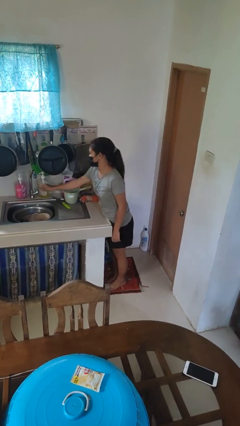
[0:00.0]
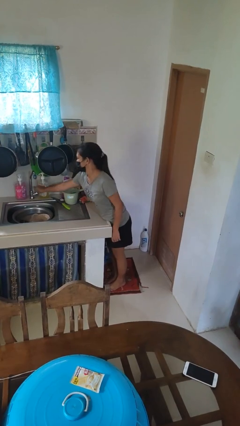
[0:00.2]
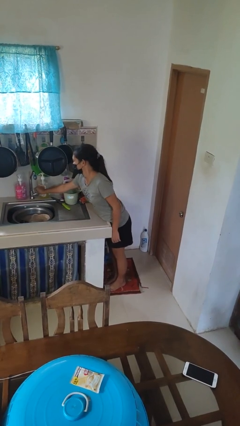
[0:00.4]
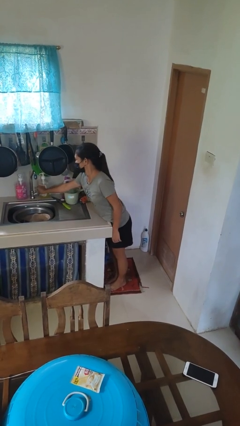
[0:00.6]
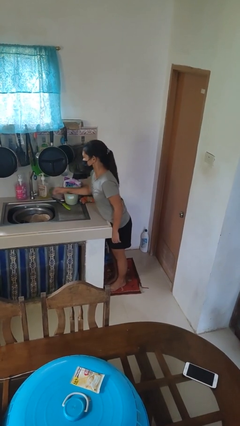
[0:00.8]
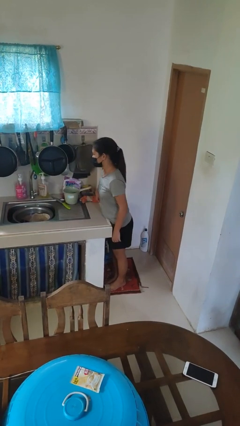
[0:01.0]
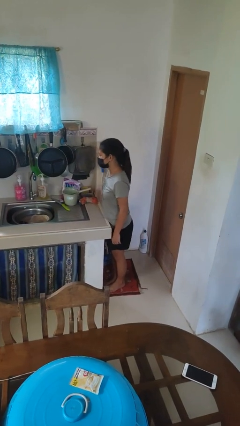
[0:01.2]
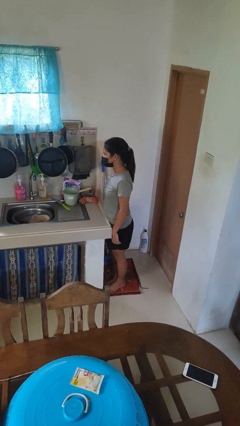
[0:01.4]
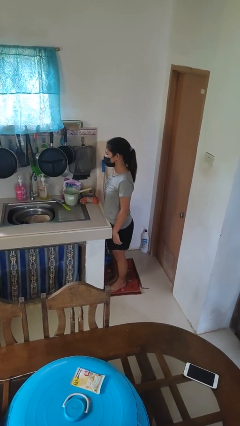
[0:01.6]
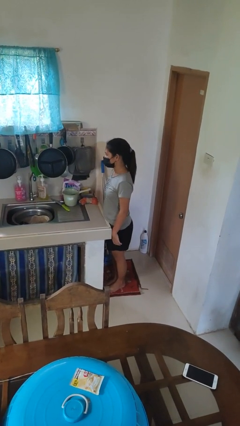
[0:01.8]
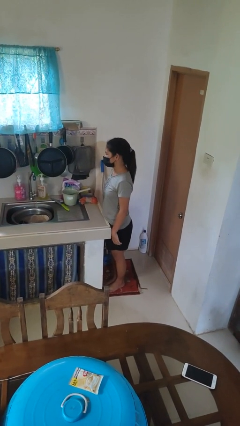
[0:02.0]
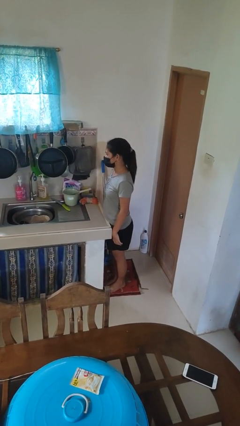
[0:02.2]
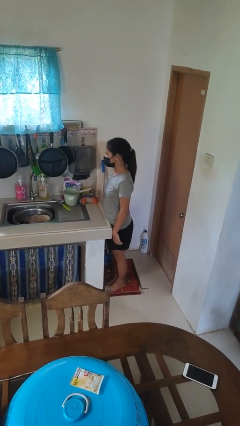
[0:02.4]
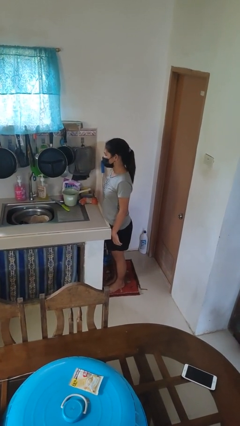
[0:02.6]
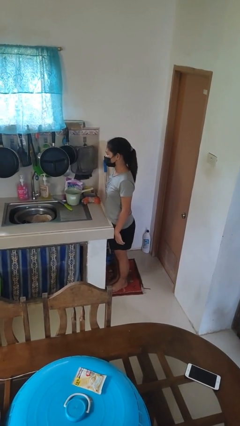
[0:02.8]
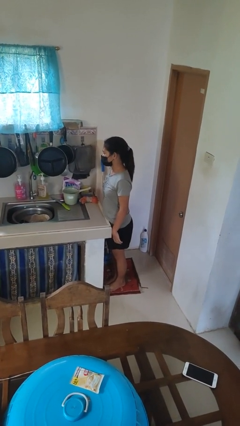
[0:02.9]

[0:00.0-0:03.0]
person turns on faucet

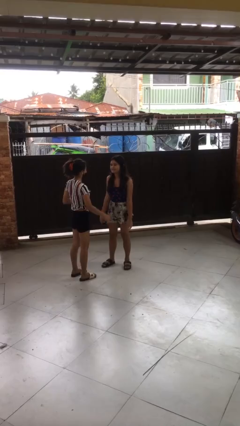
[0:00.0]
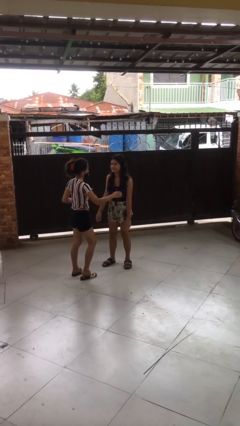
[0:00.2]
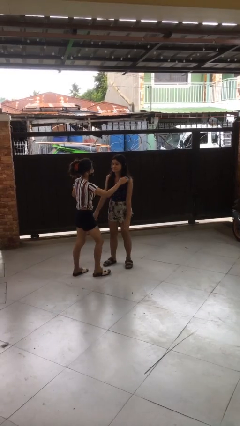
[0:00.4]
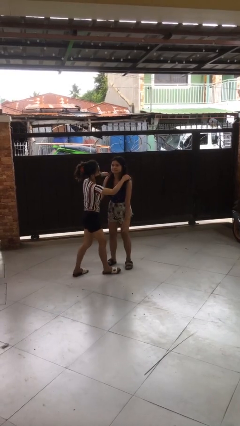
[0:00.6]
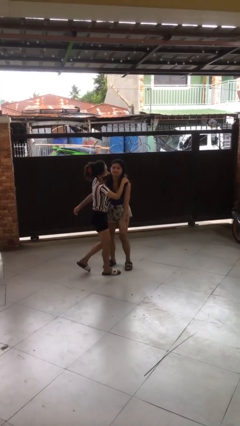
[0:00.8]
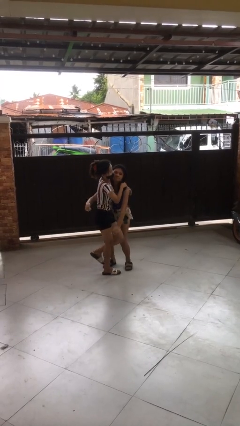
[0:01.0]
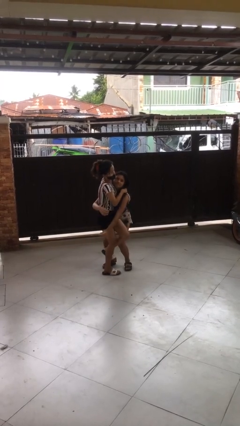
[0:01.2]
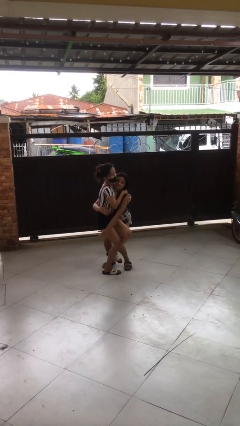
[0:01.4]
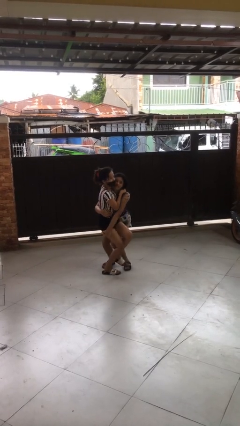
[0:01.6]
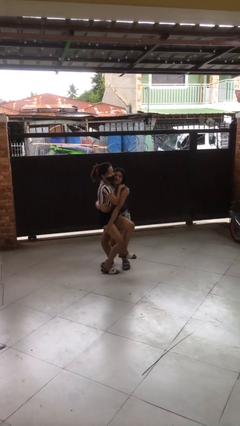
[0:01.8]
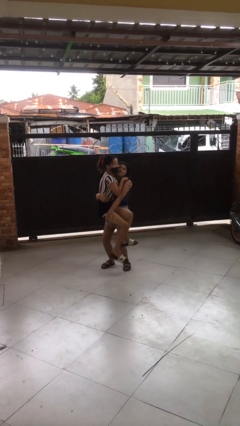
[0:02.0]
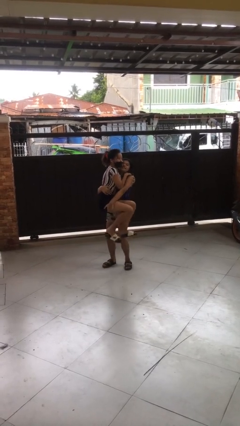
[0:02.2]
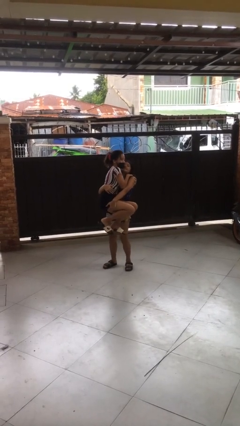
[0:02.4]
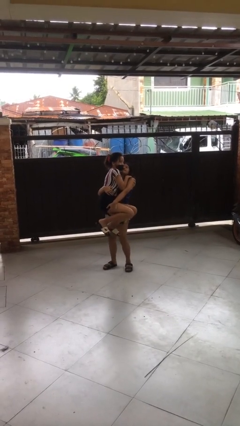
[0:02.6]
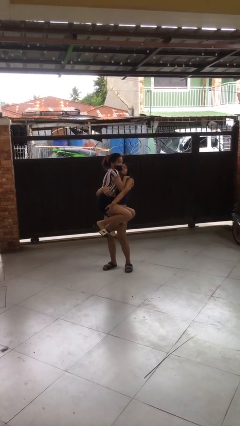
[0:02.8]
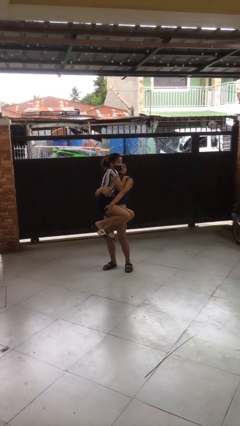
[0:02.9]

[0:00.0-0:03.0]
person picks up person

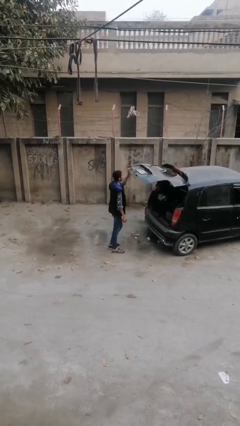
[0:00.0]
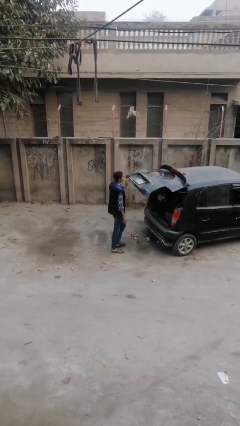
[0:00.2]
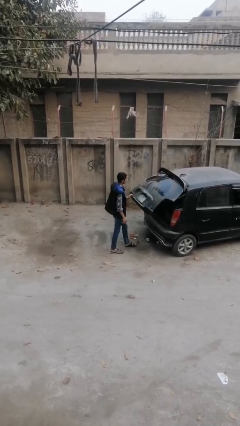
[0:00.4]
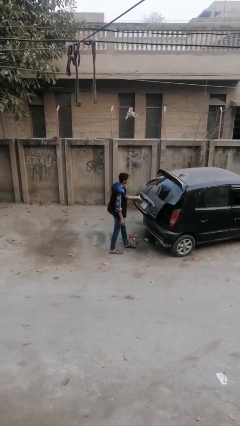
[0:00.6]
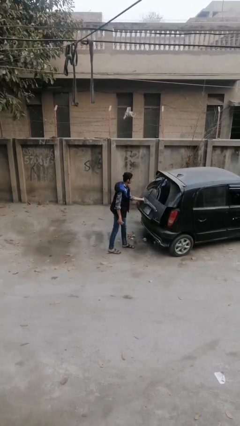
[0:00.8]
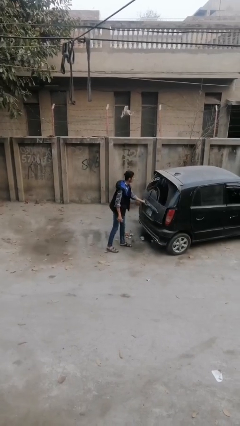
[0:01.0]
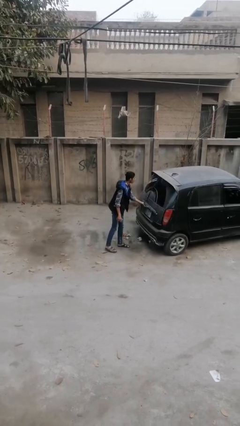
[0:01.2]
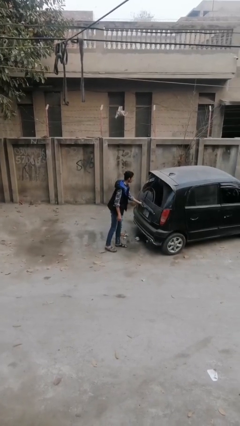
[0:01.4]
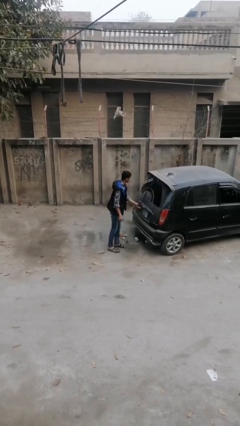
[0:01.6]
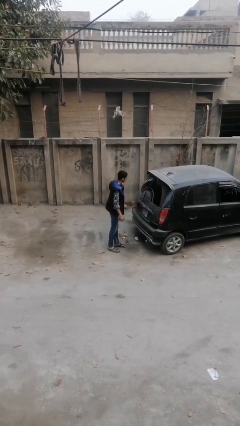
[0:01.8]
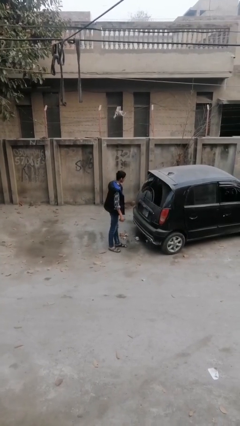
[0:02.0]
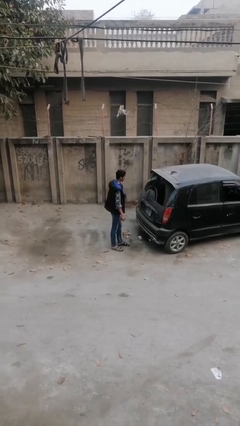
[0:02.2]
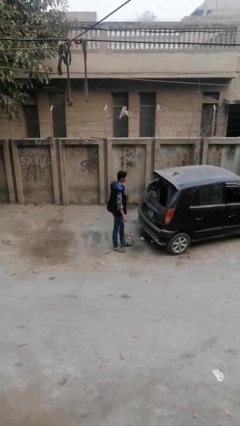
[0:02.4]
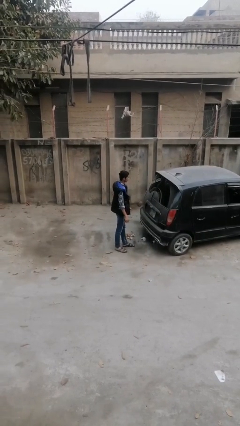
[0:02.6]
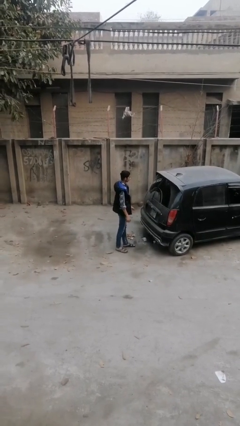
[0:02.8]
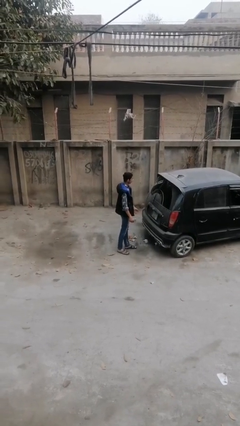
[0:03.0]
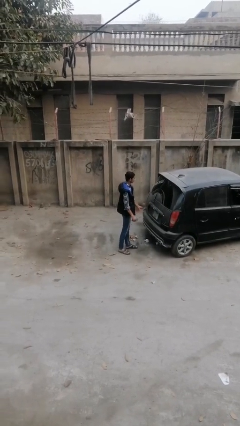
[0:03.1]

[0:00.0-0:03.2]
person closes car trunk

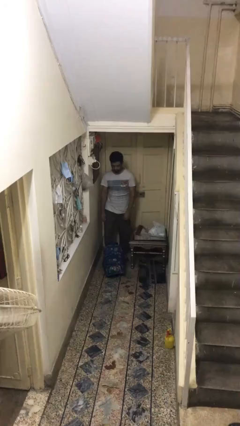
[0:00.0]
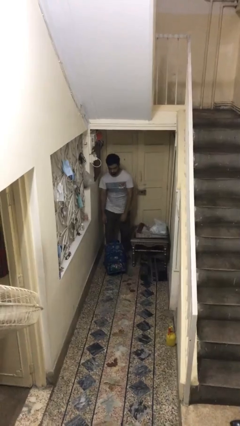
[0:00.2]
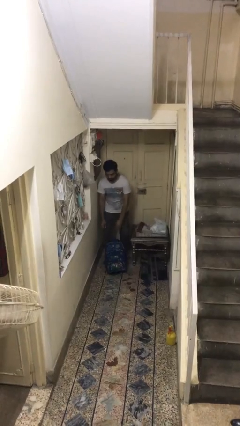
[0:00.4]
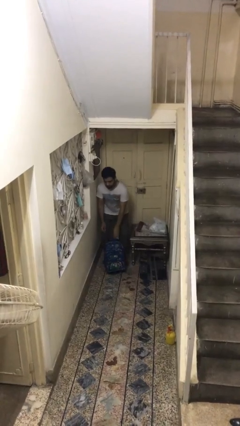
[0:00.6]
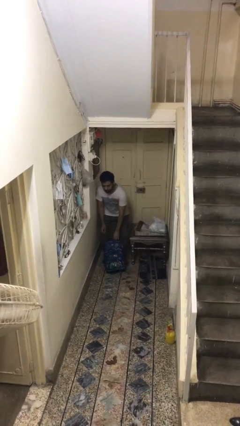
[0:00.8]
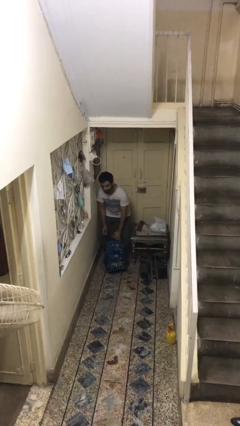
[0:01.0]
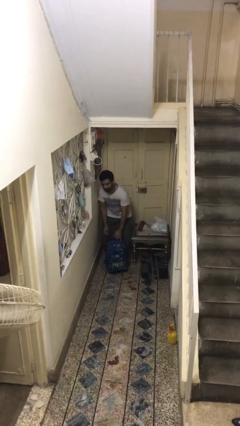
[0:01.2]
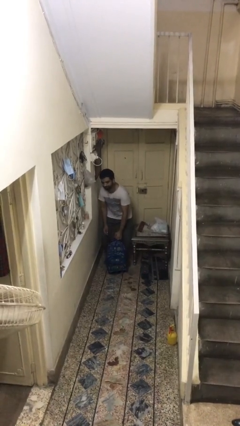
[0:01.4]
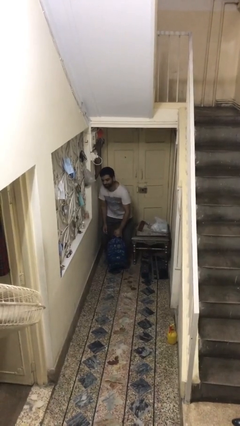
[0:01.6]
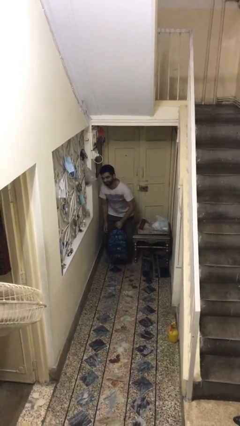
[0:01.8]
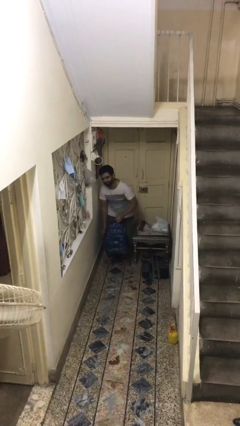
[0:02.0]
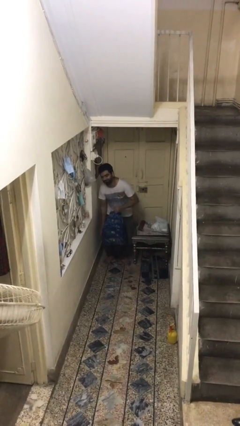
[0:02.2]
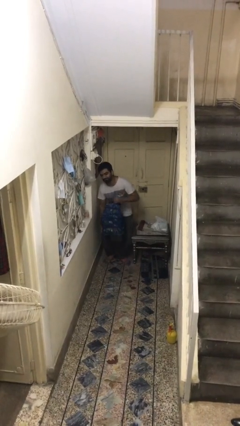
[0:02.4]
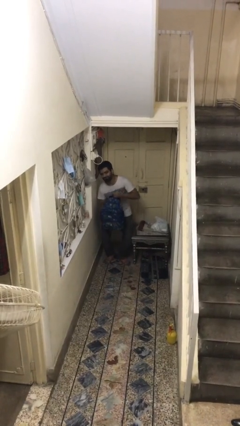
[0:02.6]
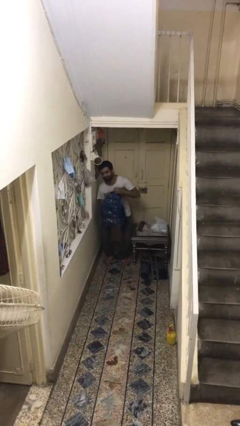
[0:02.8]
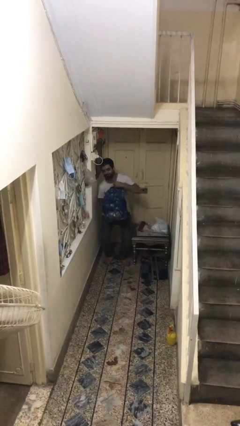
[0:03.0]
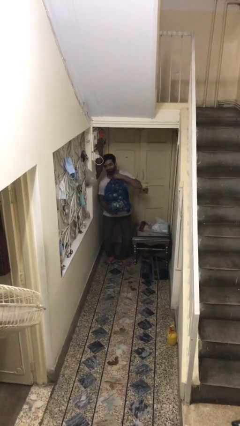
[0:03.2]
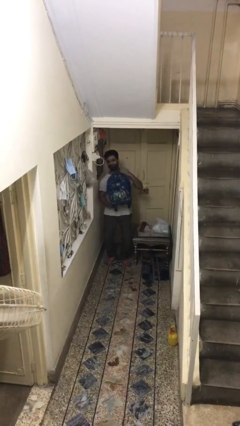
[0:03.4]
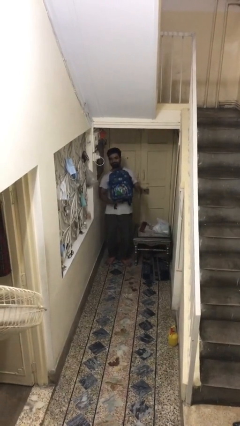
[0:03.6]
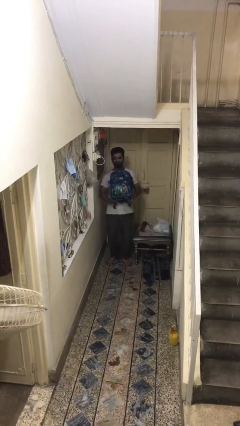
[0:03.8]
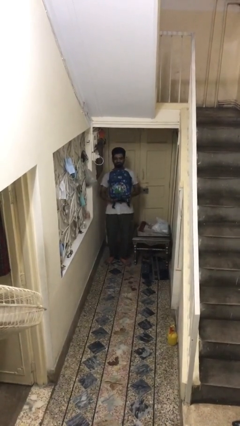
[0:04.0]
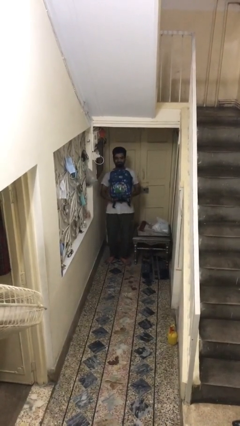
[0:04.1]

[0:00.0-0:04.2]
person picks up object from floor

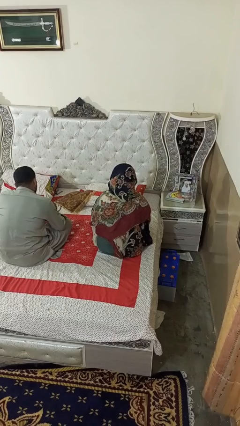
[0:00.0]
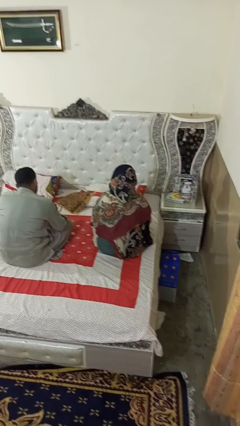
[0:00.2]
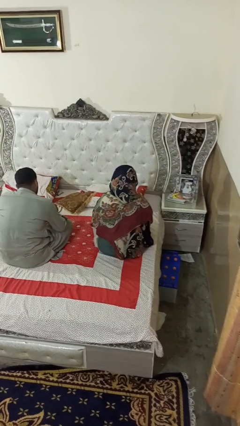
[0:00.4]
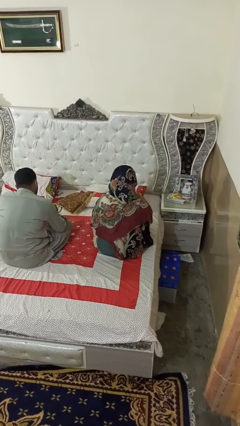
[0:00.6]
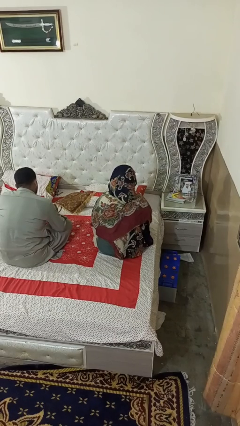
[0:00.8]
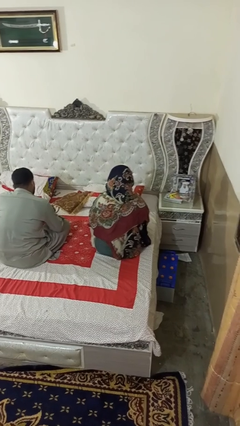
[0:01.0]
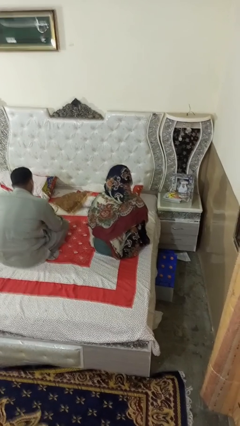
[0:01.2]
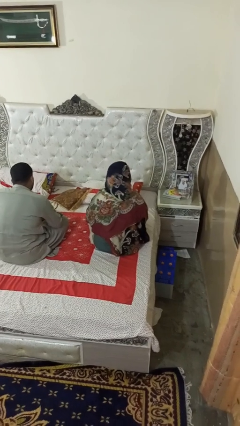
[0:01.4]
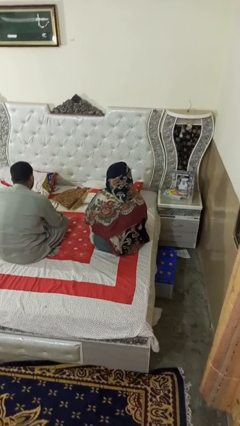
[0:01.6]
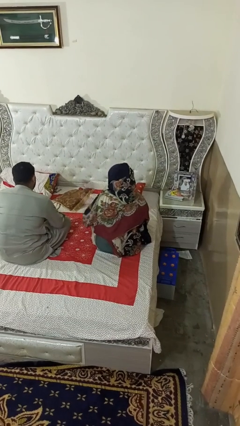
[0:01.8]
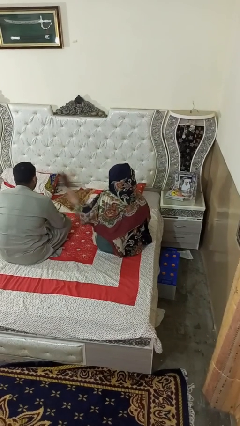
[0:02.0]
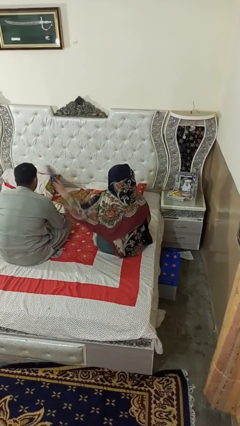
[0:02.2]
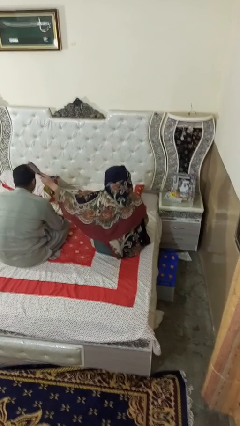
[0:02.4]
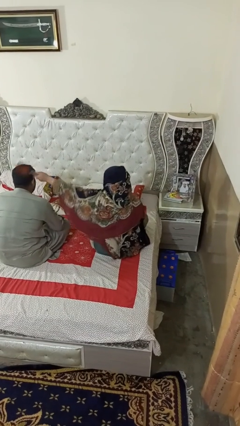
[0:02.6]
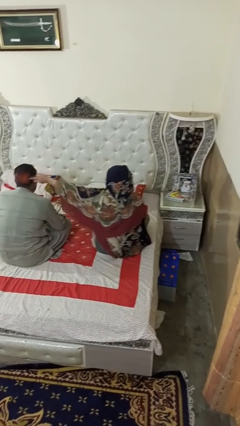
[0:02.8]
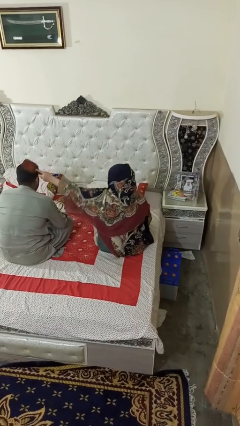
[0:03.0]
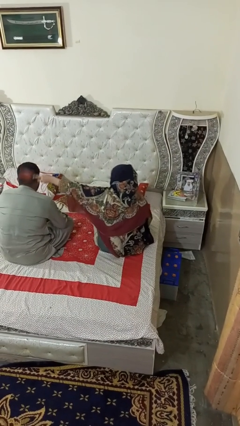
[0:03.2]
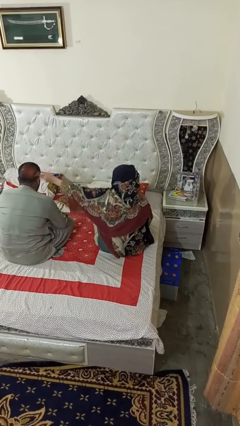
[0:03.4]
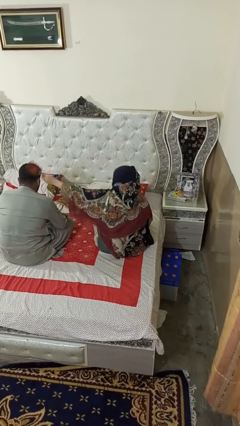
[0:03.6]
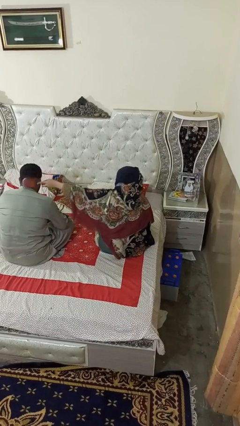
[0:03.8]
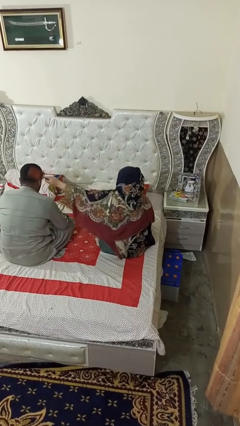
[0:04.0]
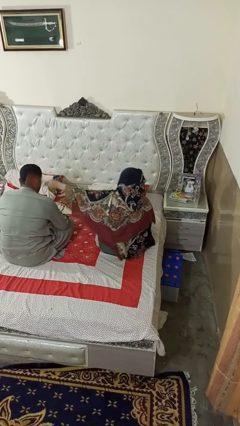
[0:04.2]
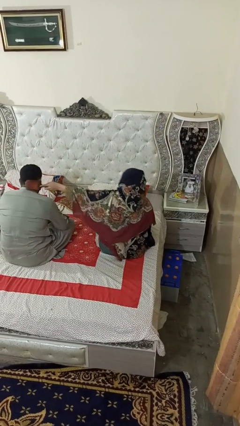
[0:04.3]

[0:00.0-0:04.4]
person brushes hair of person
